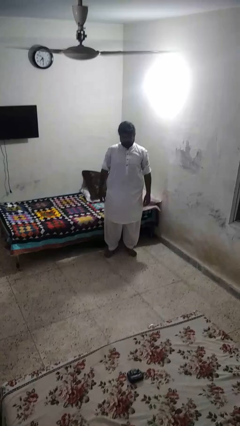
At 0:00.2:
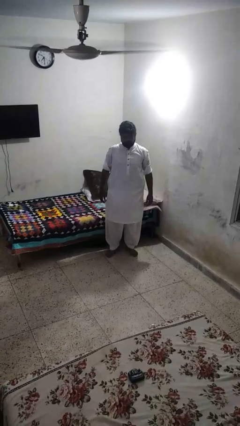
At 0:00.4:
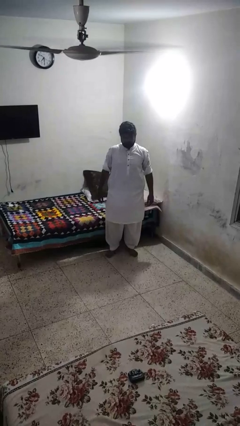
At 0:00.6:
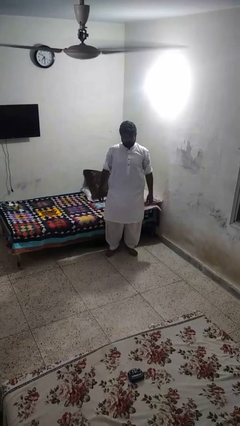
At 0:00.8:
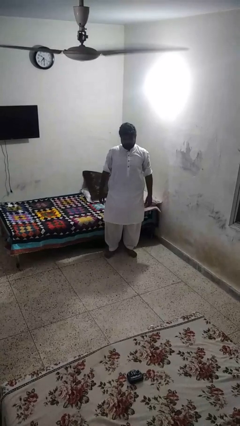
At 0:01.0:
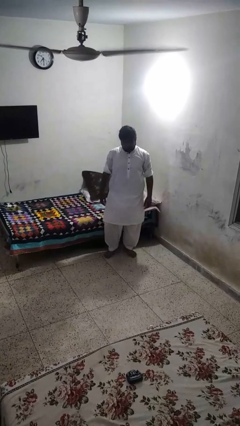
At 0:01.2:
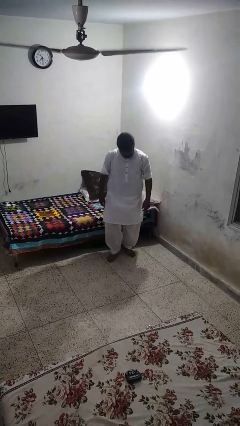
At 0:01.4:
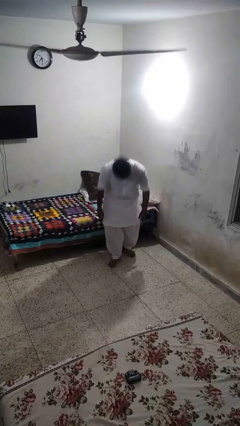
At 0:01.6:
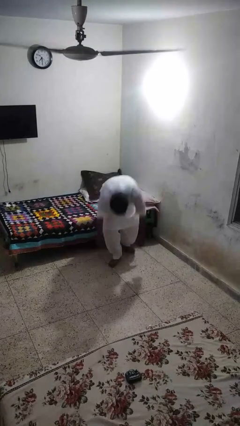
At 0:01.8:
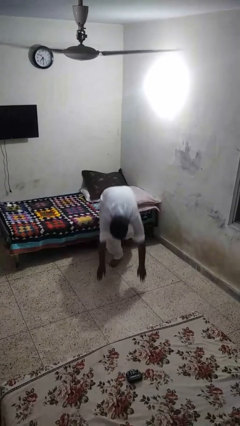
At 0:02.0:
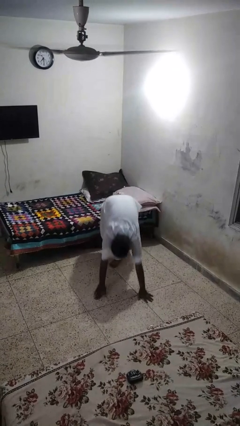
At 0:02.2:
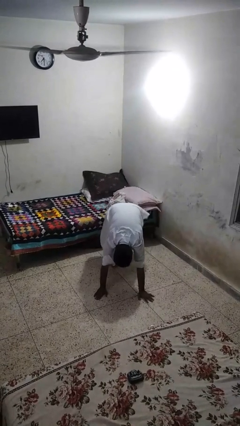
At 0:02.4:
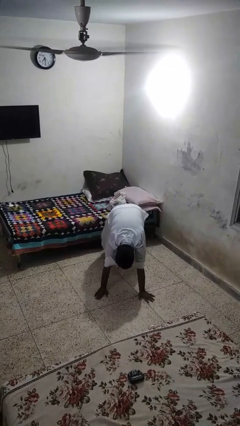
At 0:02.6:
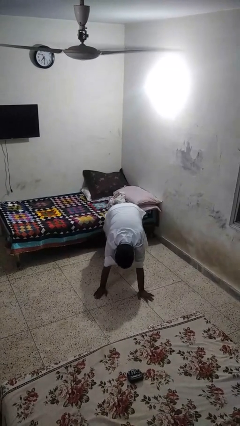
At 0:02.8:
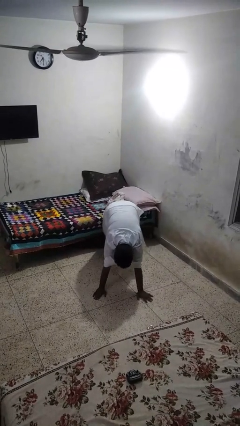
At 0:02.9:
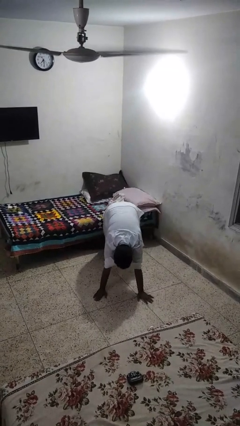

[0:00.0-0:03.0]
person exercises with plank

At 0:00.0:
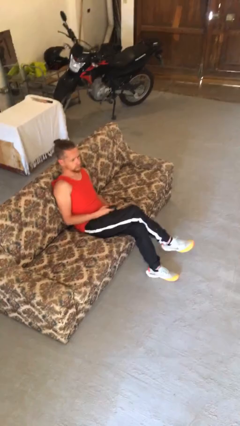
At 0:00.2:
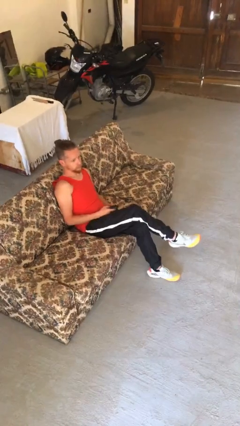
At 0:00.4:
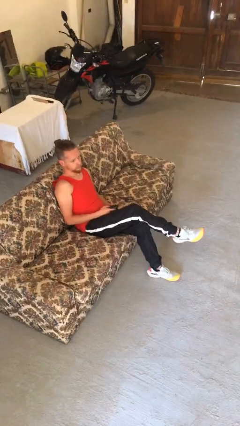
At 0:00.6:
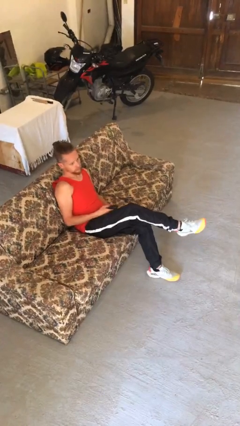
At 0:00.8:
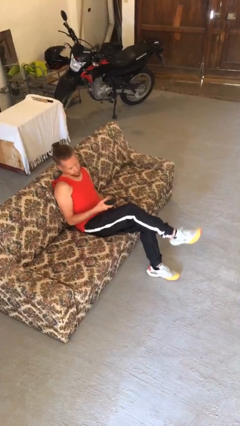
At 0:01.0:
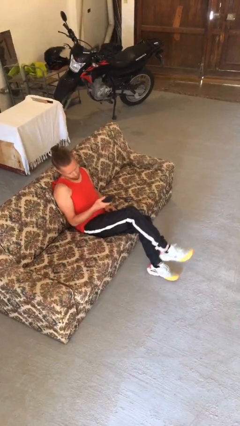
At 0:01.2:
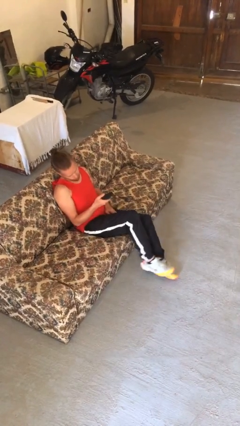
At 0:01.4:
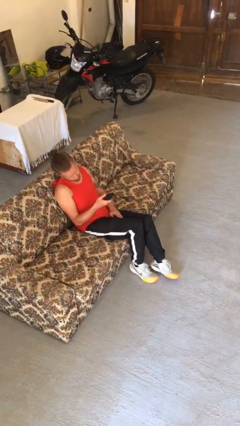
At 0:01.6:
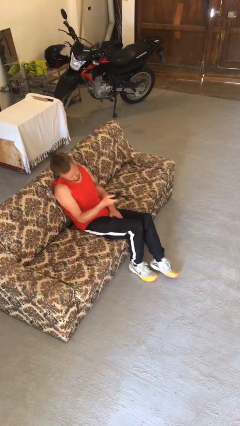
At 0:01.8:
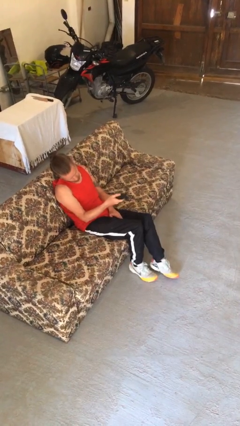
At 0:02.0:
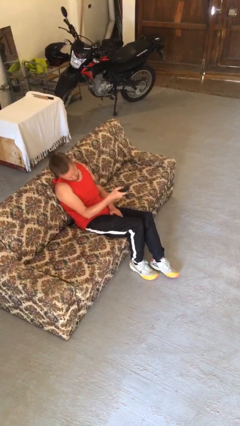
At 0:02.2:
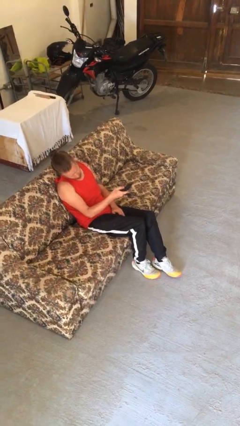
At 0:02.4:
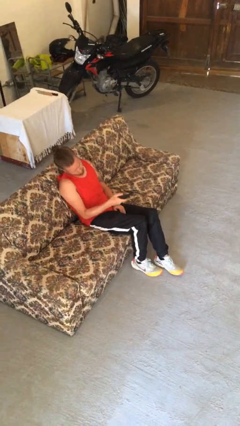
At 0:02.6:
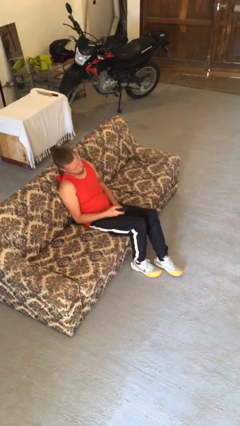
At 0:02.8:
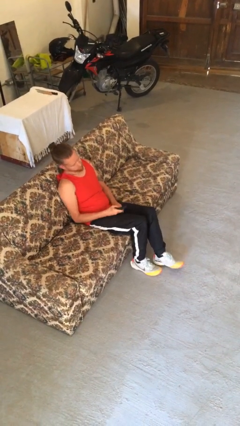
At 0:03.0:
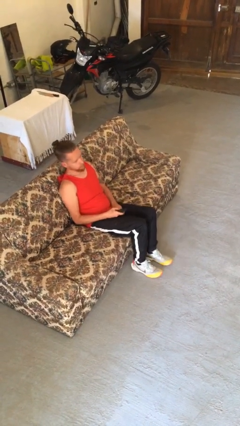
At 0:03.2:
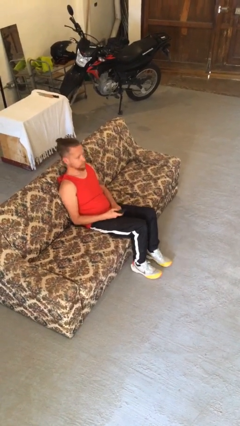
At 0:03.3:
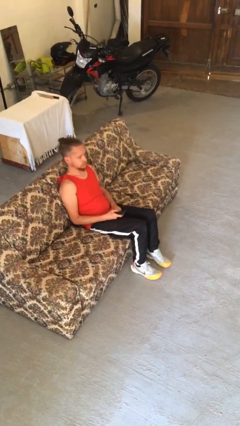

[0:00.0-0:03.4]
person uses television remote

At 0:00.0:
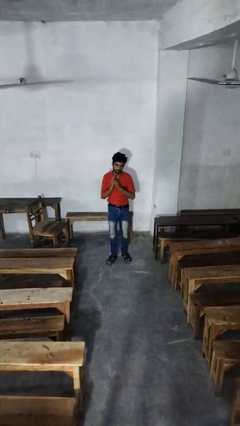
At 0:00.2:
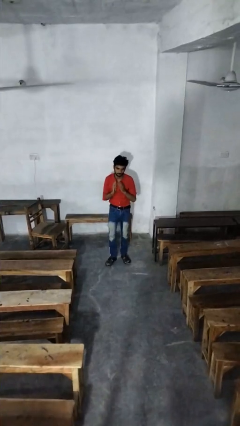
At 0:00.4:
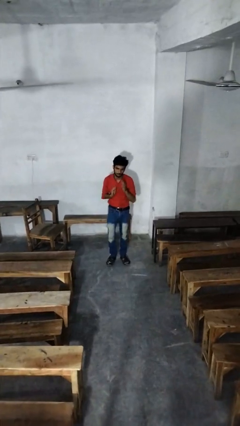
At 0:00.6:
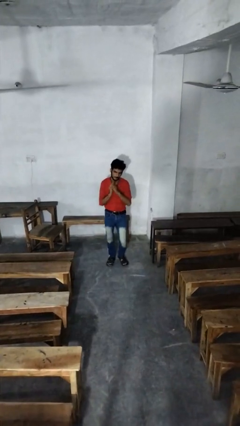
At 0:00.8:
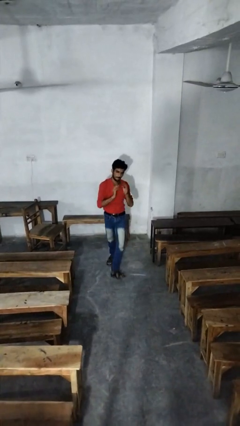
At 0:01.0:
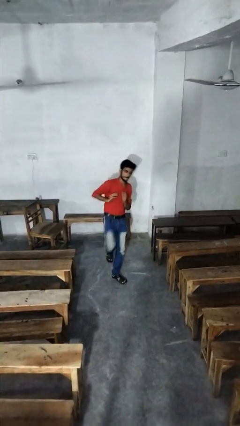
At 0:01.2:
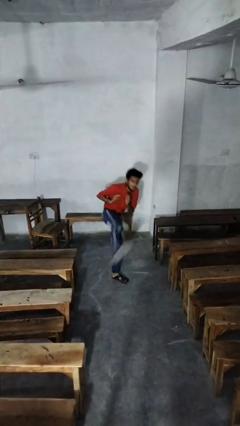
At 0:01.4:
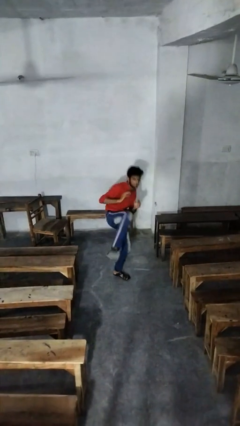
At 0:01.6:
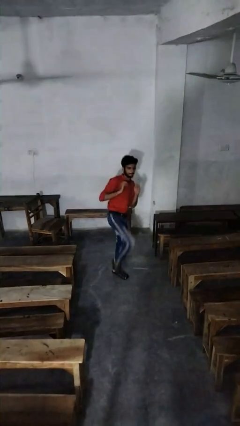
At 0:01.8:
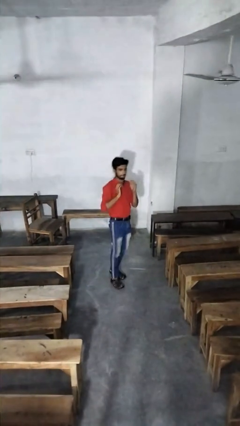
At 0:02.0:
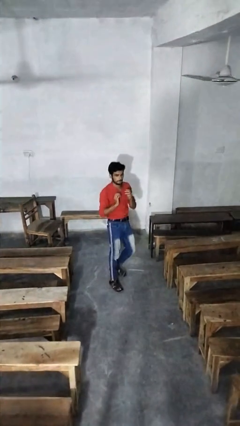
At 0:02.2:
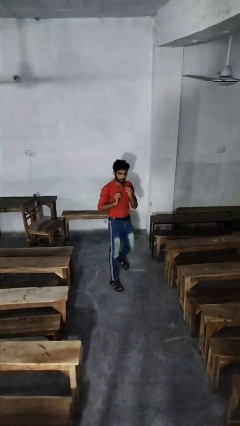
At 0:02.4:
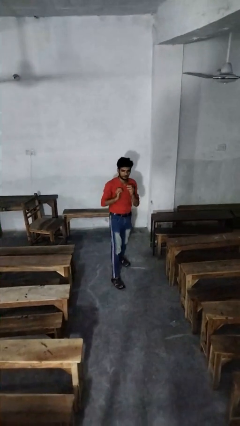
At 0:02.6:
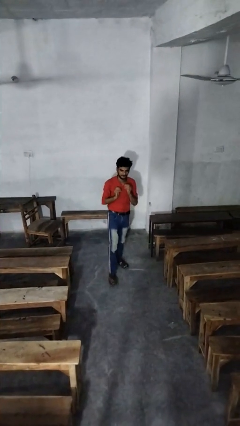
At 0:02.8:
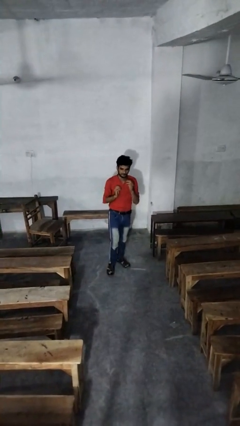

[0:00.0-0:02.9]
person karate kicks

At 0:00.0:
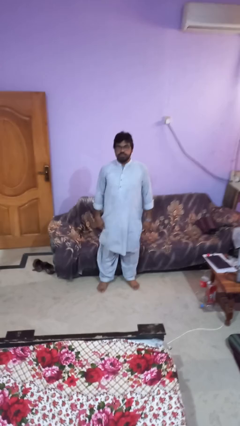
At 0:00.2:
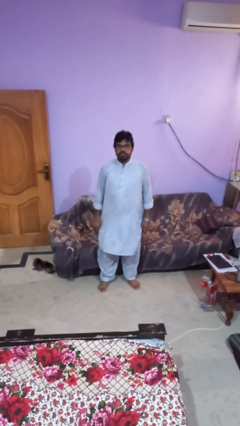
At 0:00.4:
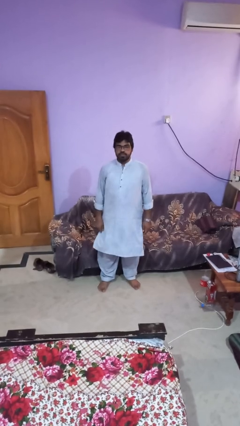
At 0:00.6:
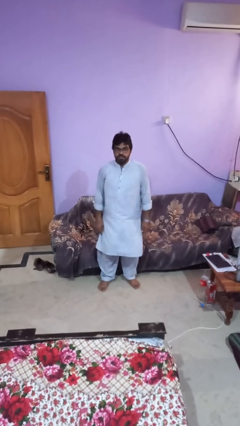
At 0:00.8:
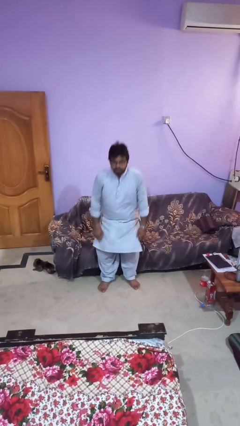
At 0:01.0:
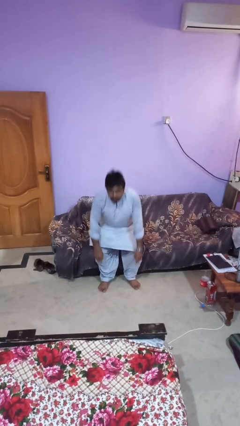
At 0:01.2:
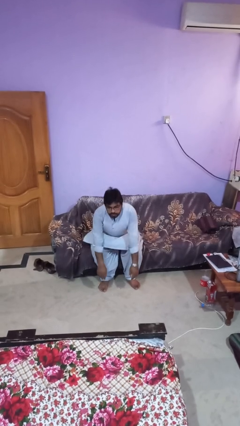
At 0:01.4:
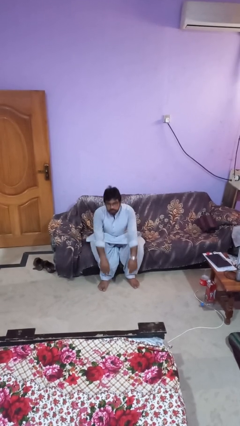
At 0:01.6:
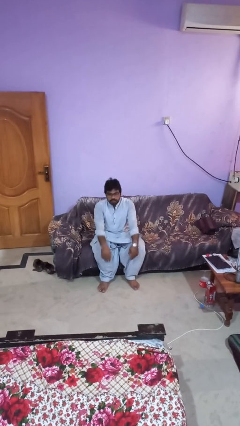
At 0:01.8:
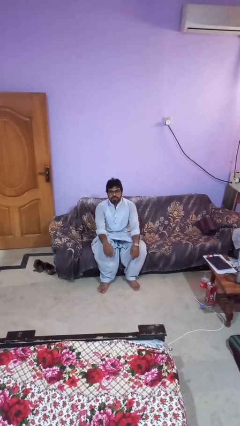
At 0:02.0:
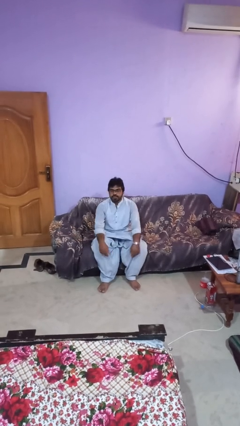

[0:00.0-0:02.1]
person lies down on couch

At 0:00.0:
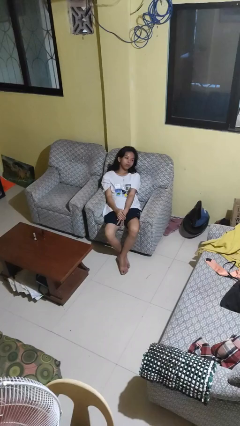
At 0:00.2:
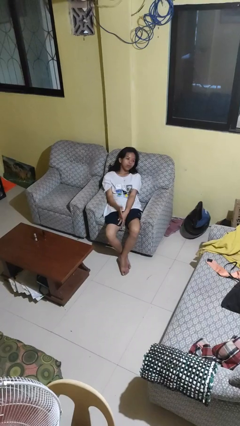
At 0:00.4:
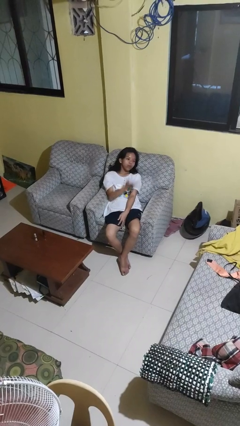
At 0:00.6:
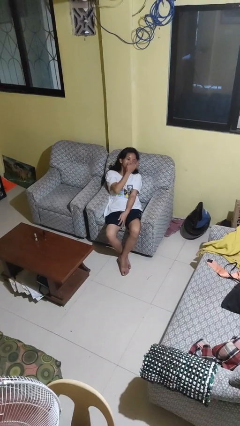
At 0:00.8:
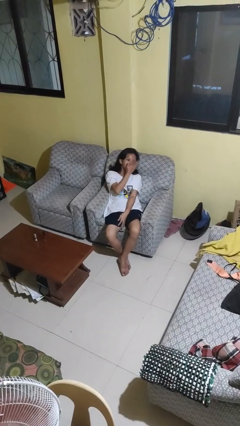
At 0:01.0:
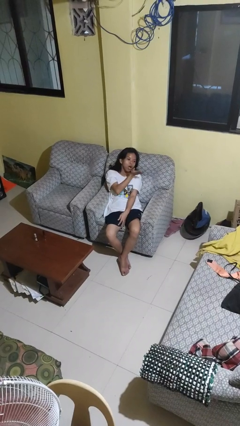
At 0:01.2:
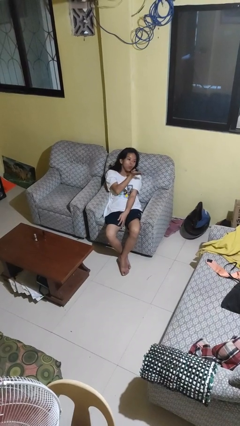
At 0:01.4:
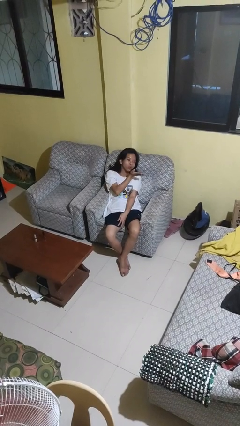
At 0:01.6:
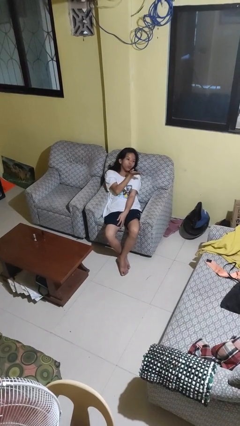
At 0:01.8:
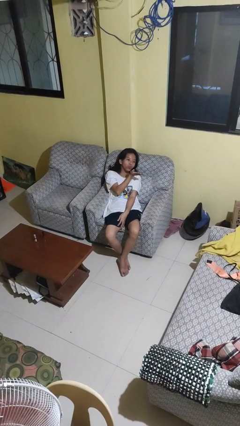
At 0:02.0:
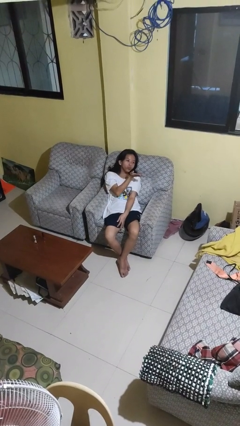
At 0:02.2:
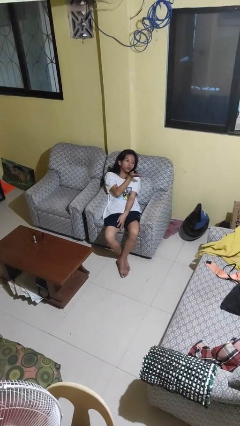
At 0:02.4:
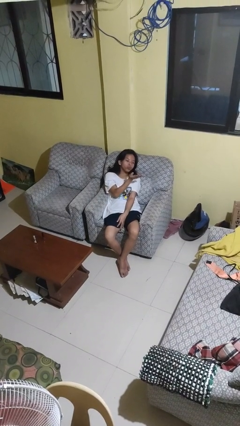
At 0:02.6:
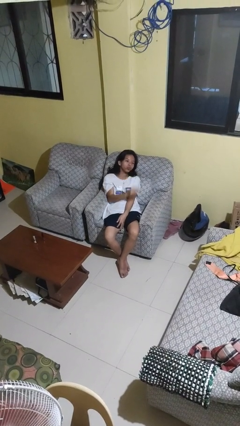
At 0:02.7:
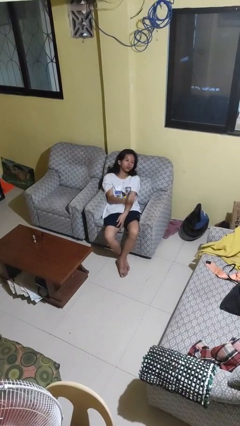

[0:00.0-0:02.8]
person gestures blow kiss

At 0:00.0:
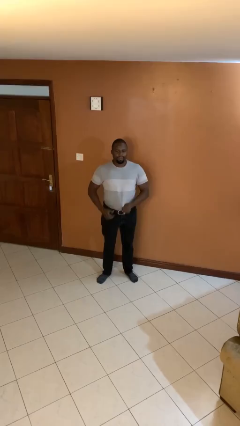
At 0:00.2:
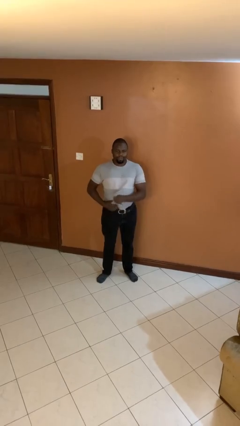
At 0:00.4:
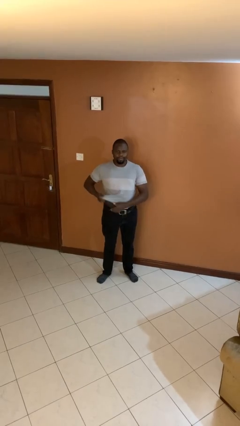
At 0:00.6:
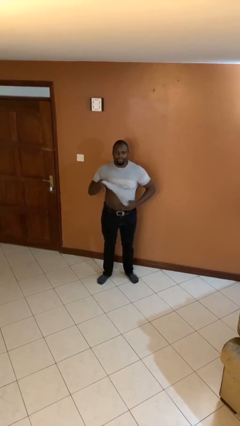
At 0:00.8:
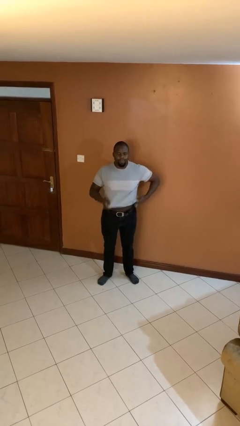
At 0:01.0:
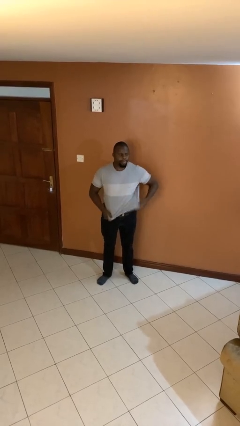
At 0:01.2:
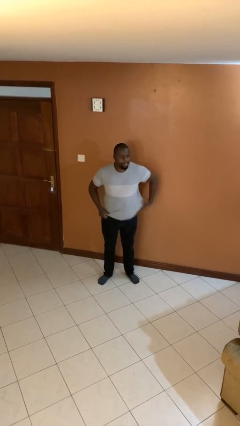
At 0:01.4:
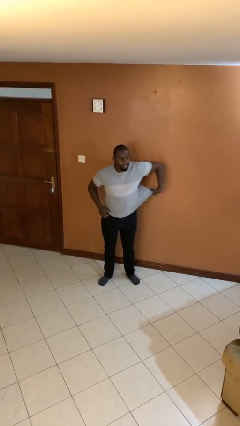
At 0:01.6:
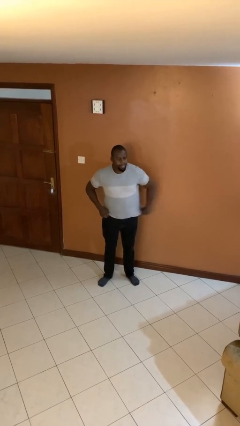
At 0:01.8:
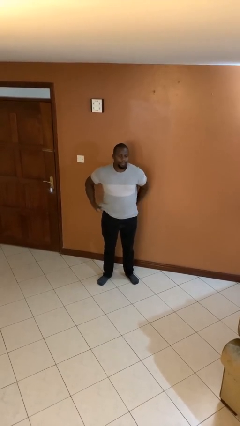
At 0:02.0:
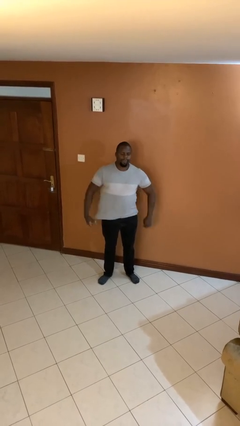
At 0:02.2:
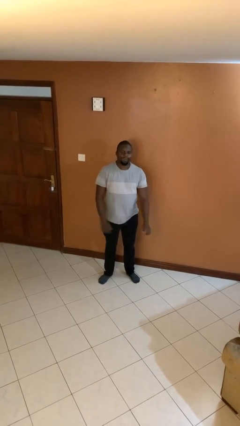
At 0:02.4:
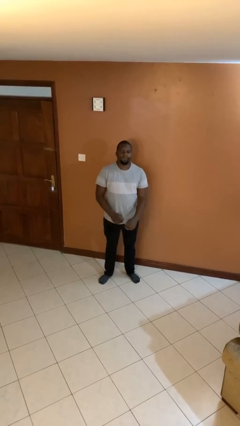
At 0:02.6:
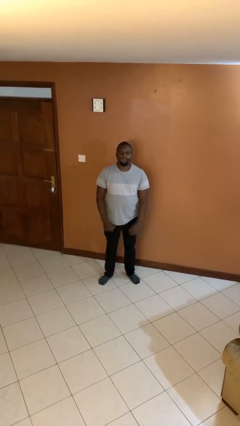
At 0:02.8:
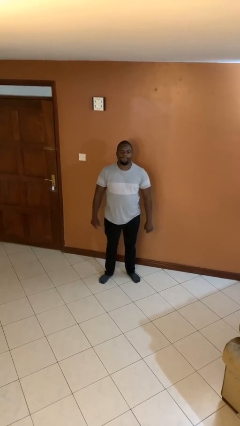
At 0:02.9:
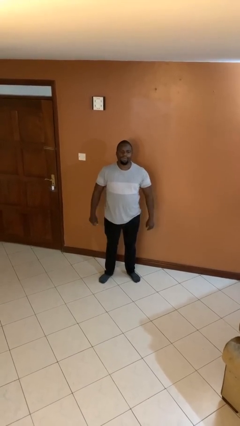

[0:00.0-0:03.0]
person untucks shirt

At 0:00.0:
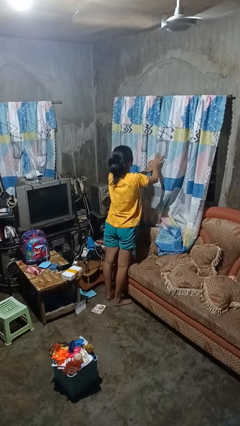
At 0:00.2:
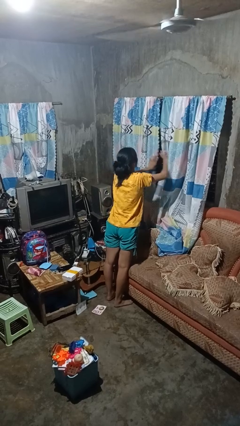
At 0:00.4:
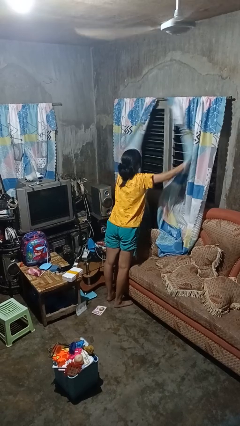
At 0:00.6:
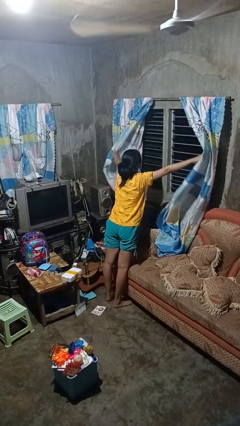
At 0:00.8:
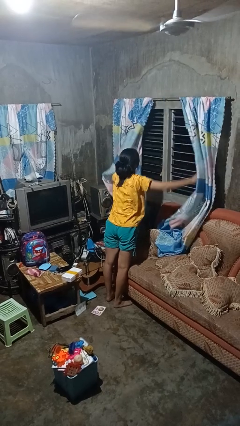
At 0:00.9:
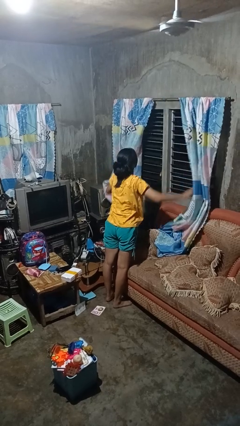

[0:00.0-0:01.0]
person opens curtains
